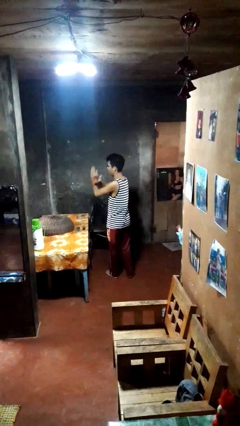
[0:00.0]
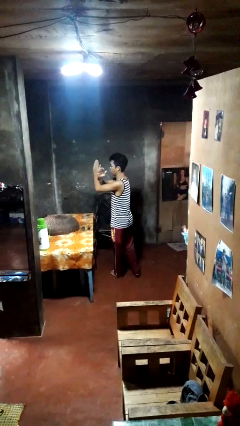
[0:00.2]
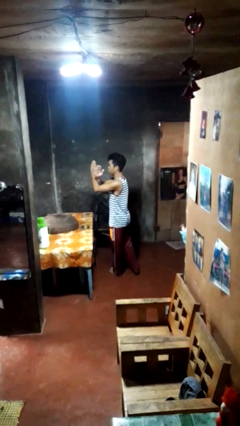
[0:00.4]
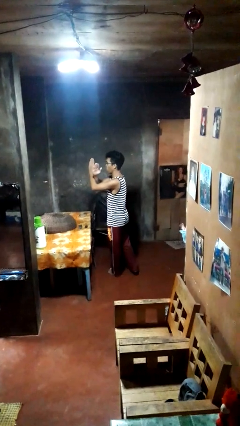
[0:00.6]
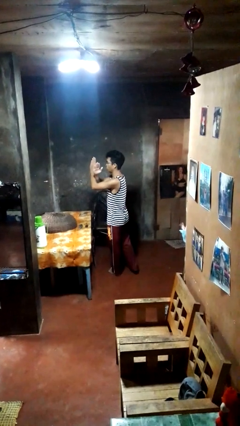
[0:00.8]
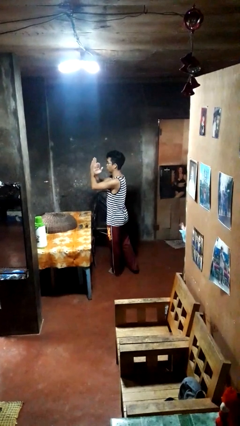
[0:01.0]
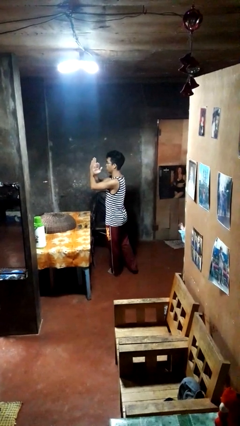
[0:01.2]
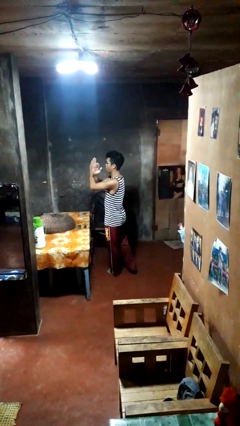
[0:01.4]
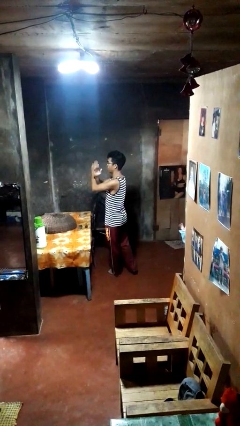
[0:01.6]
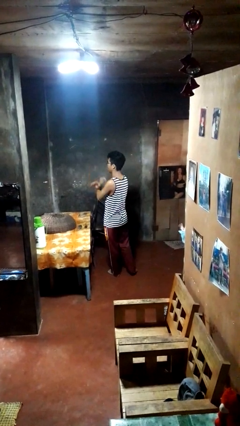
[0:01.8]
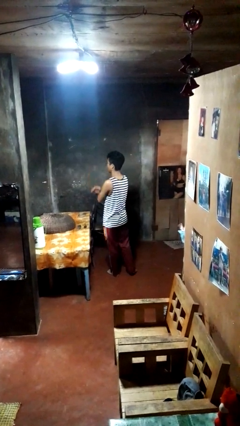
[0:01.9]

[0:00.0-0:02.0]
person gestures arms x

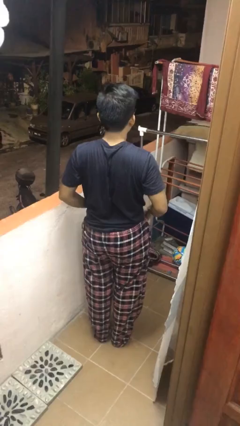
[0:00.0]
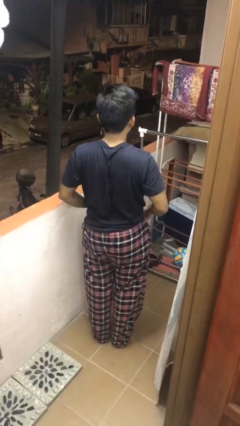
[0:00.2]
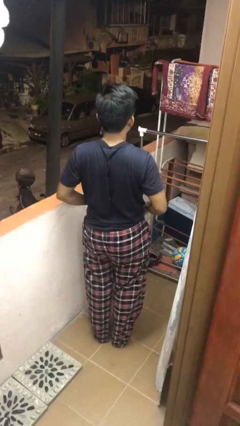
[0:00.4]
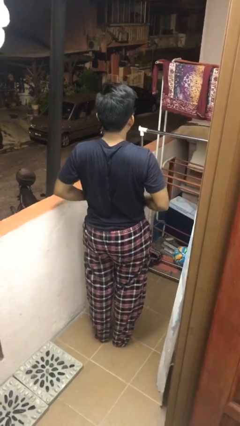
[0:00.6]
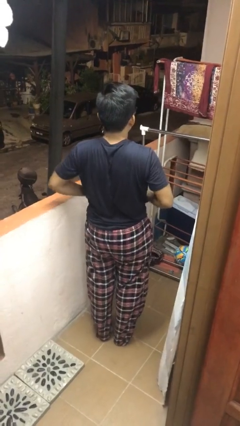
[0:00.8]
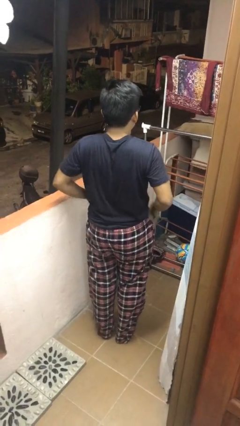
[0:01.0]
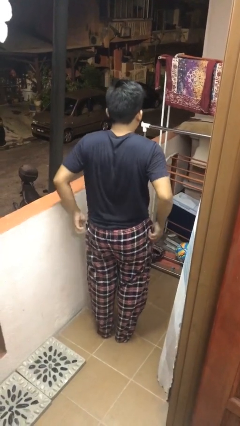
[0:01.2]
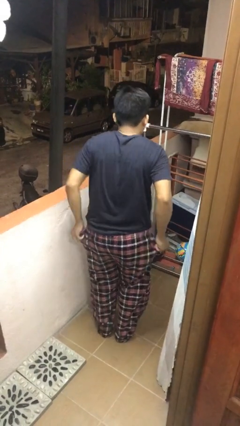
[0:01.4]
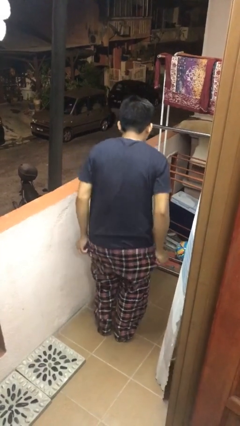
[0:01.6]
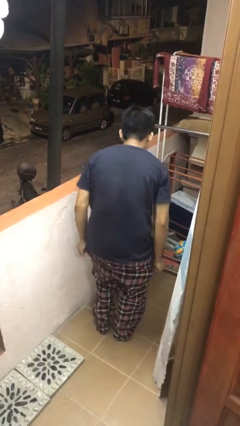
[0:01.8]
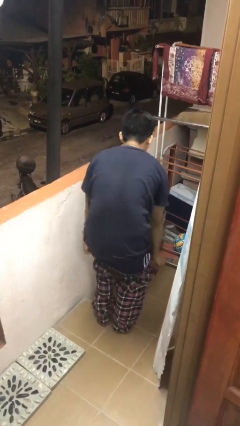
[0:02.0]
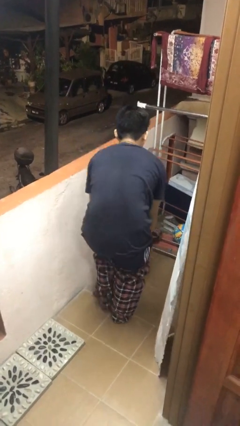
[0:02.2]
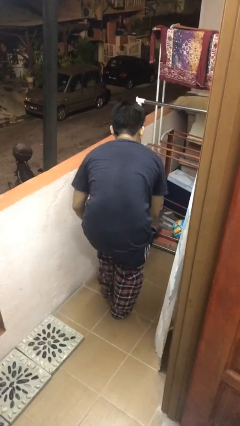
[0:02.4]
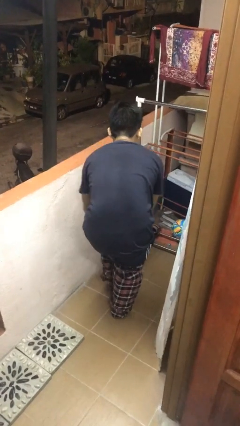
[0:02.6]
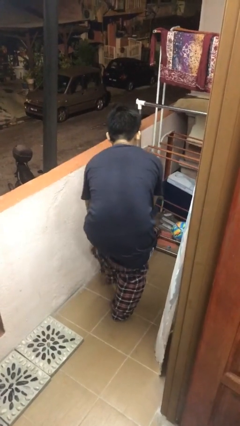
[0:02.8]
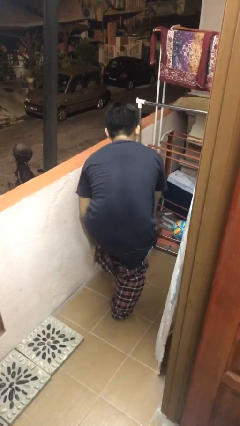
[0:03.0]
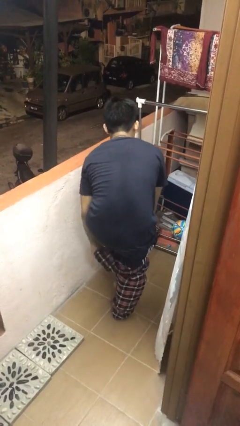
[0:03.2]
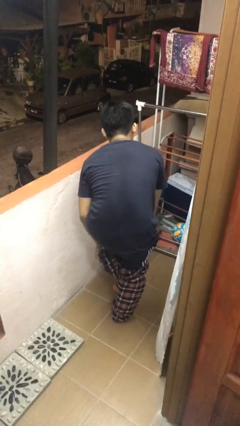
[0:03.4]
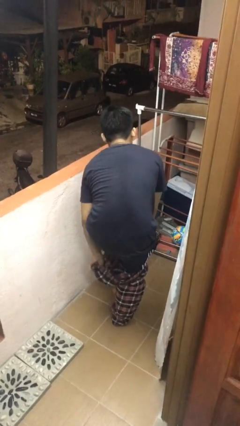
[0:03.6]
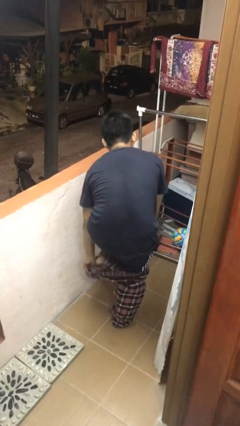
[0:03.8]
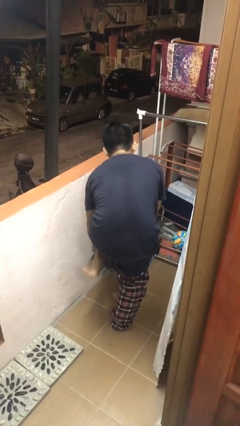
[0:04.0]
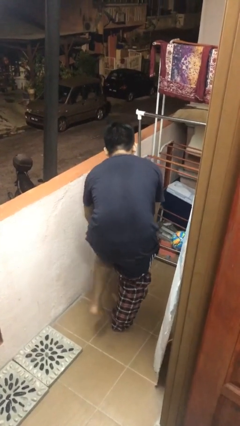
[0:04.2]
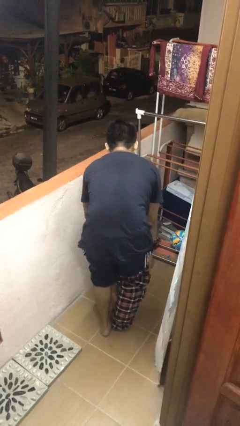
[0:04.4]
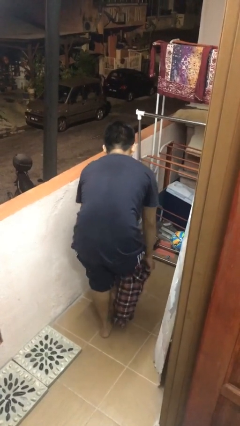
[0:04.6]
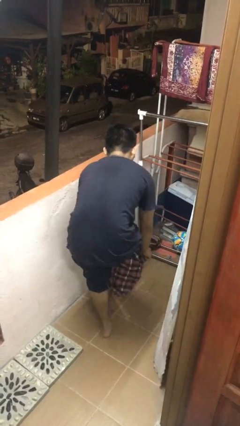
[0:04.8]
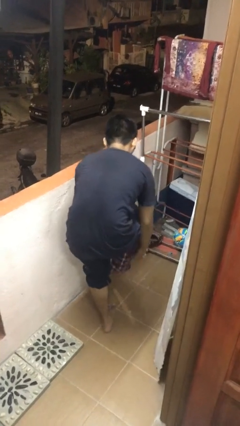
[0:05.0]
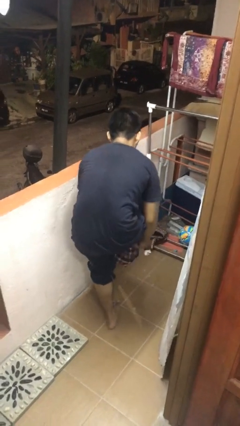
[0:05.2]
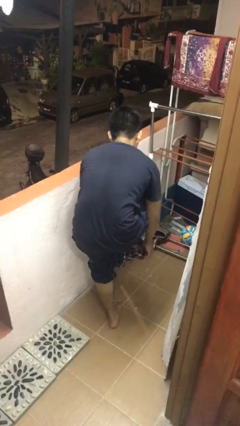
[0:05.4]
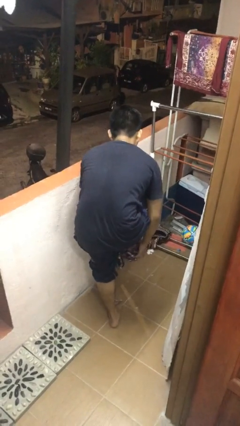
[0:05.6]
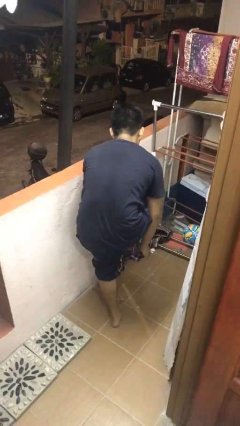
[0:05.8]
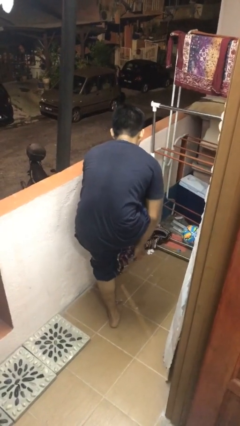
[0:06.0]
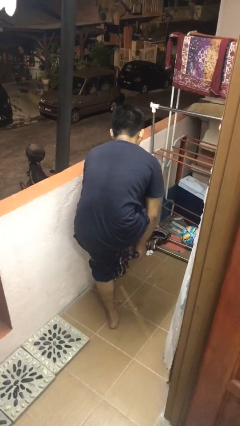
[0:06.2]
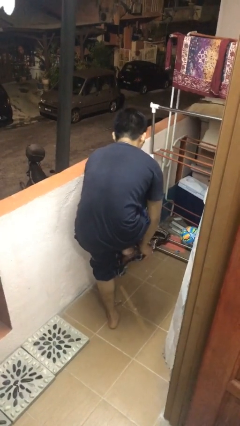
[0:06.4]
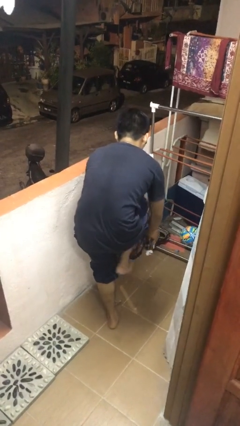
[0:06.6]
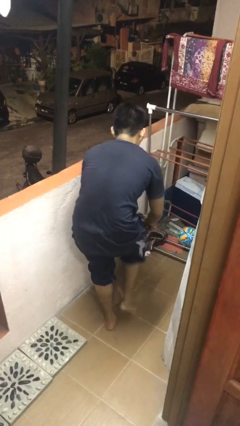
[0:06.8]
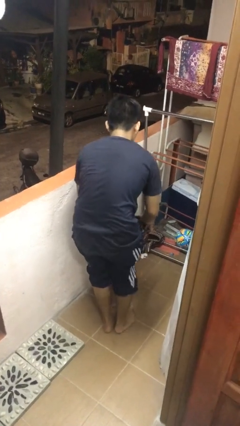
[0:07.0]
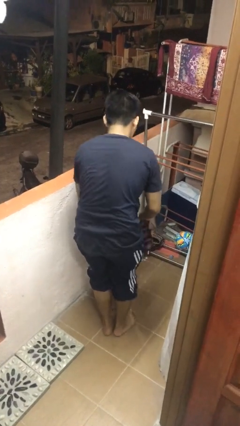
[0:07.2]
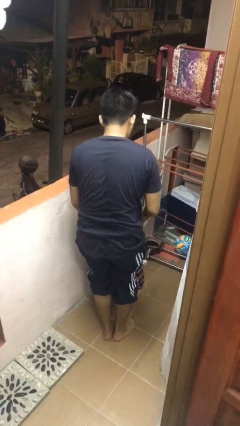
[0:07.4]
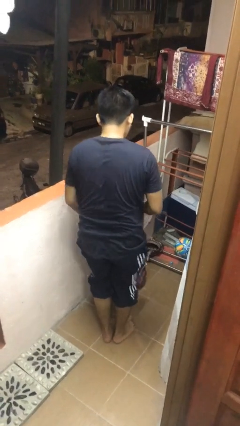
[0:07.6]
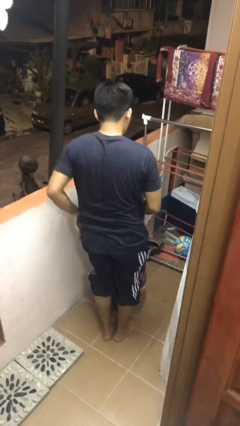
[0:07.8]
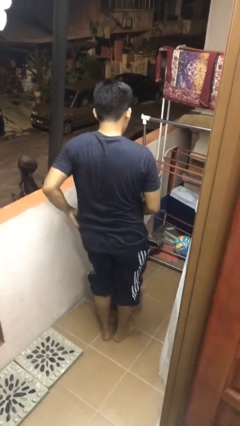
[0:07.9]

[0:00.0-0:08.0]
person takes off pants

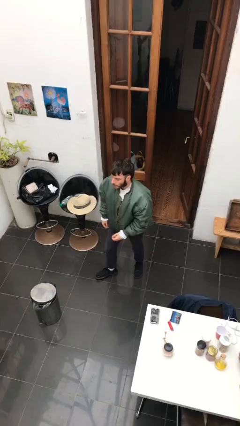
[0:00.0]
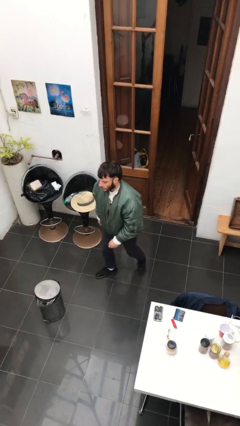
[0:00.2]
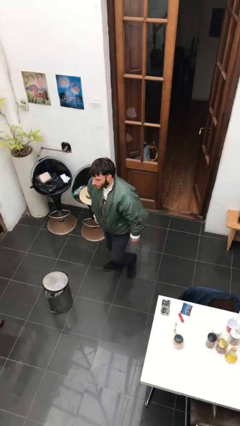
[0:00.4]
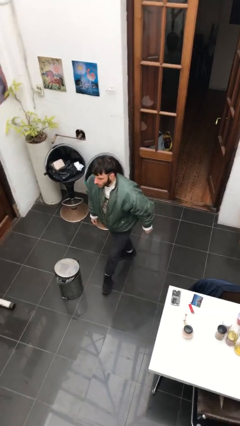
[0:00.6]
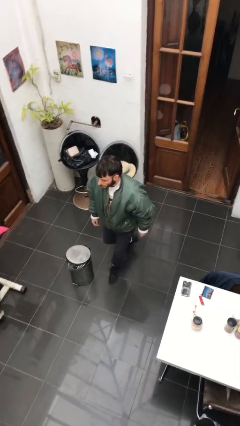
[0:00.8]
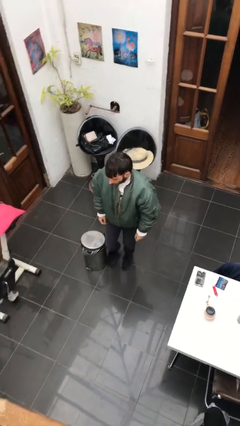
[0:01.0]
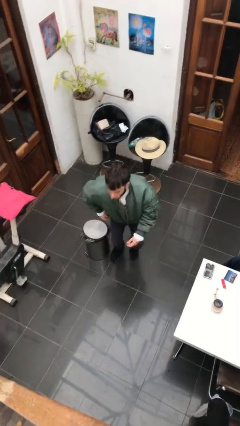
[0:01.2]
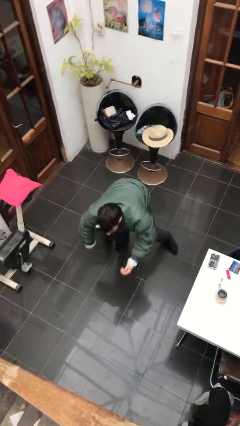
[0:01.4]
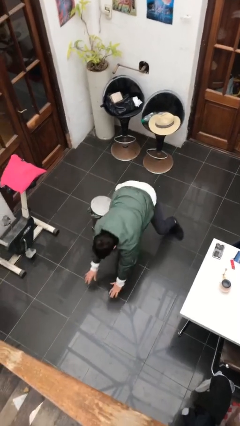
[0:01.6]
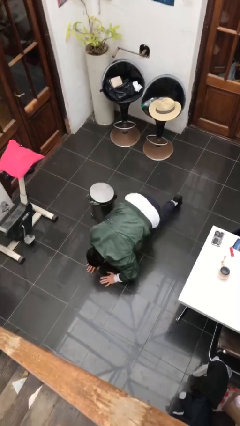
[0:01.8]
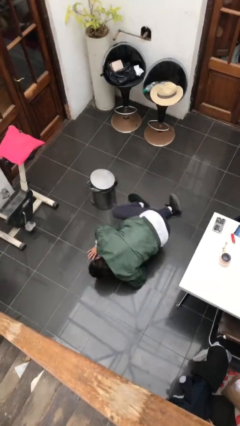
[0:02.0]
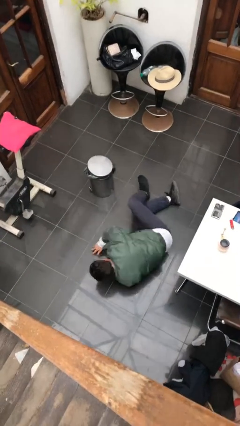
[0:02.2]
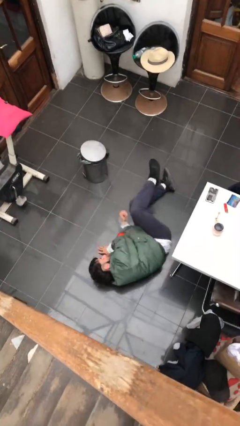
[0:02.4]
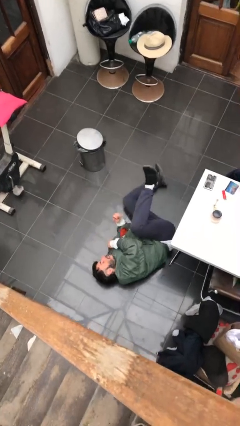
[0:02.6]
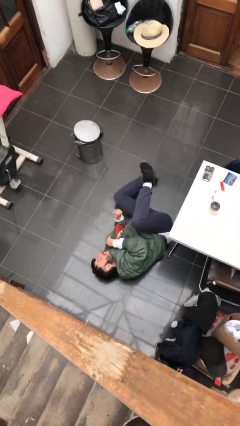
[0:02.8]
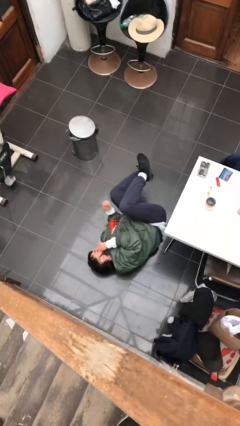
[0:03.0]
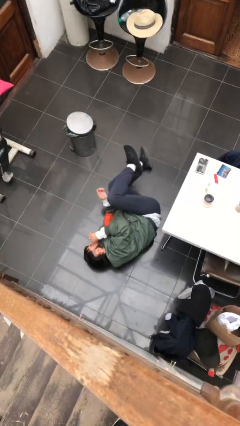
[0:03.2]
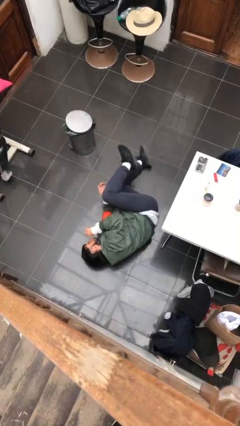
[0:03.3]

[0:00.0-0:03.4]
person trips on object on floor

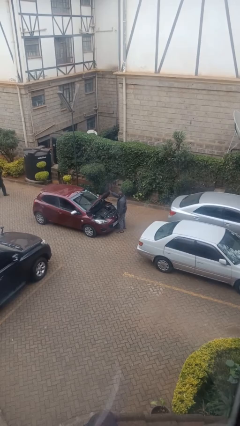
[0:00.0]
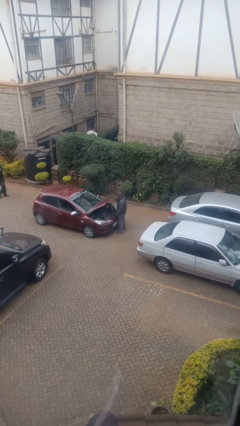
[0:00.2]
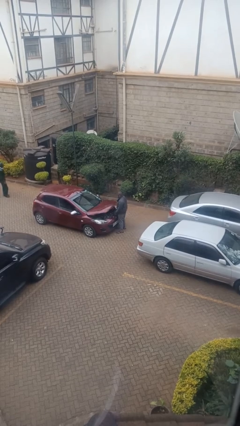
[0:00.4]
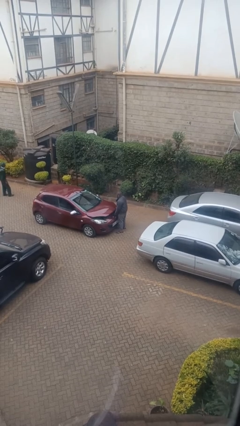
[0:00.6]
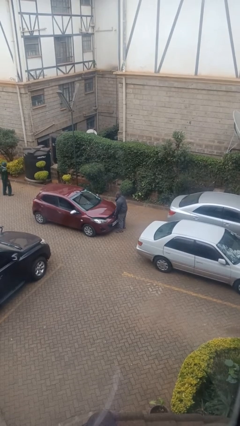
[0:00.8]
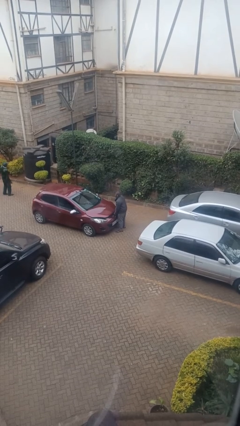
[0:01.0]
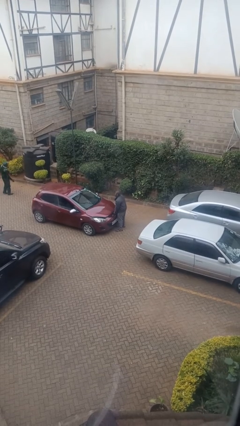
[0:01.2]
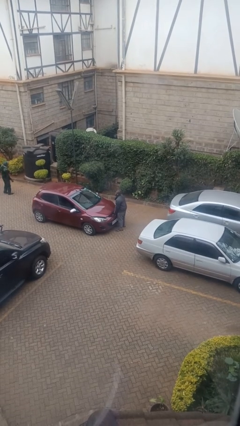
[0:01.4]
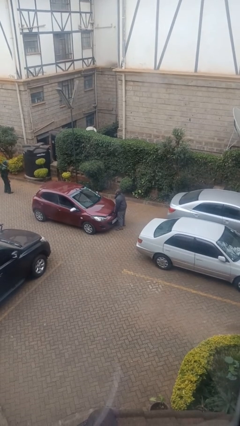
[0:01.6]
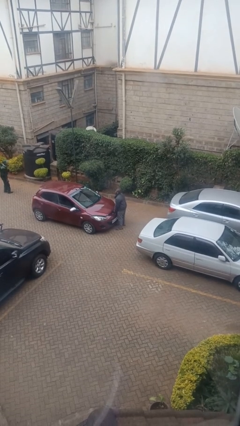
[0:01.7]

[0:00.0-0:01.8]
person closes car hood

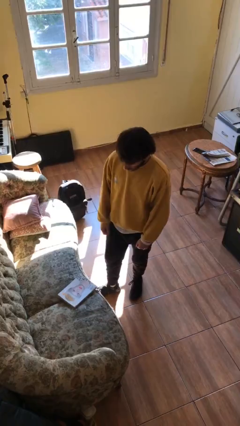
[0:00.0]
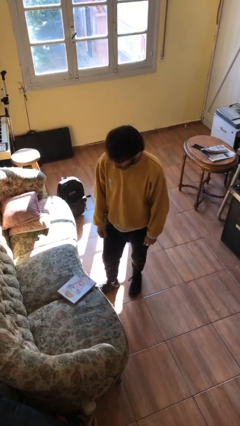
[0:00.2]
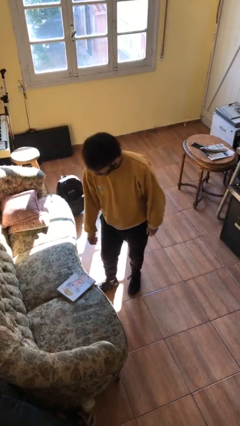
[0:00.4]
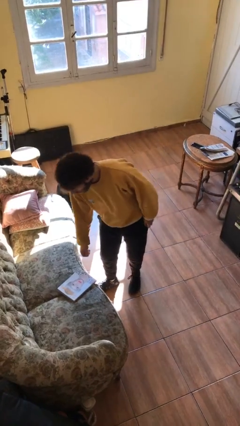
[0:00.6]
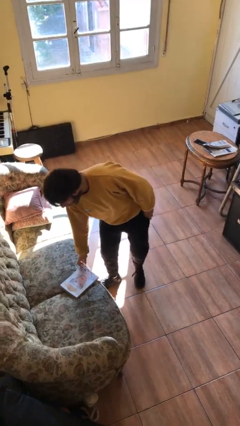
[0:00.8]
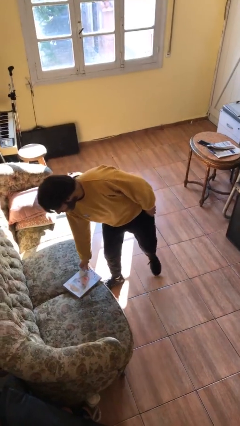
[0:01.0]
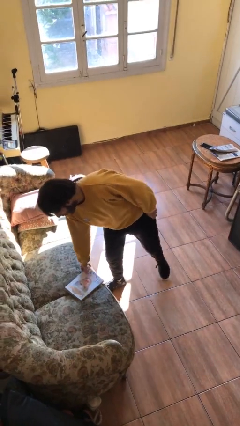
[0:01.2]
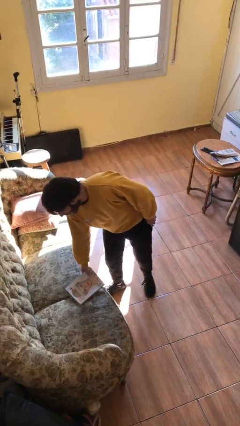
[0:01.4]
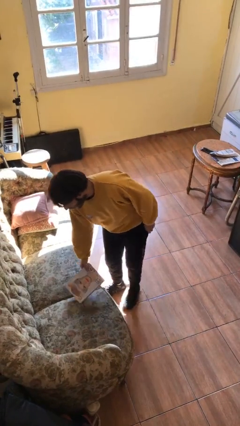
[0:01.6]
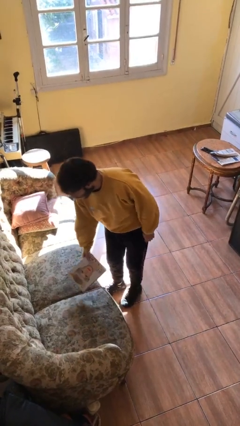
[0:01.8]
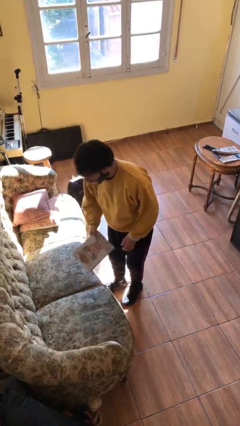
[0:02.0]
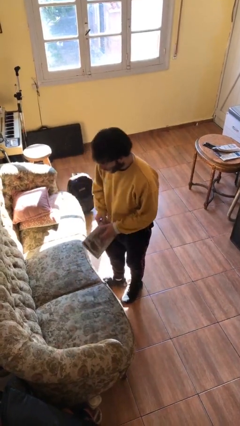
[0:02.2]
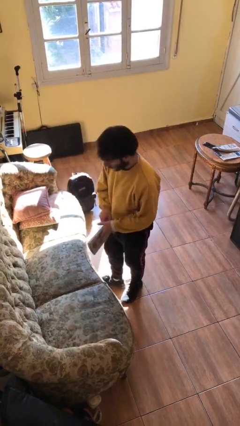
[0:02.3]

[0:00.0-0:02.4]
person picks up object from couch
